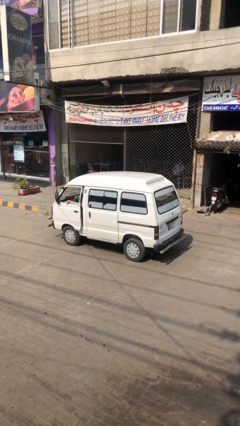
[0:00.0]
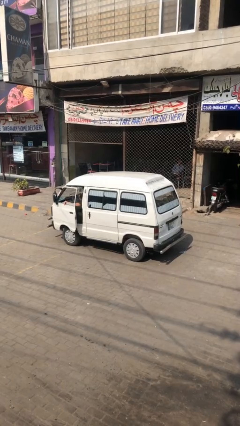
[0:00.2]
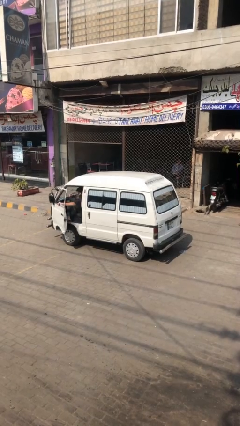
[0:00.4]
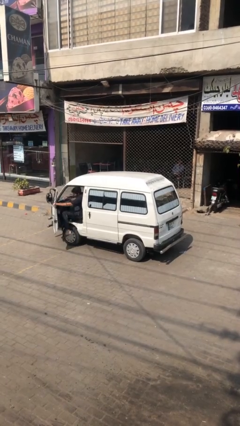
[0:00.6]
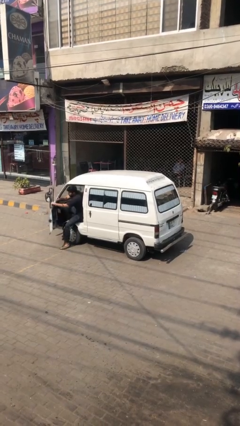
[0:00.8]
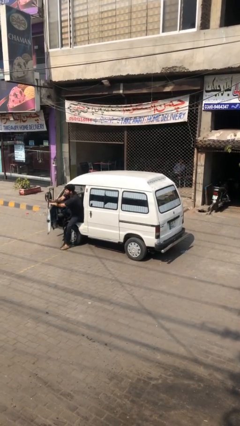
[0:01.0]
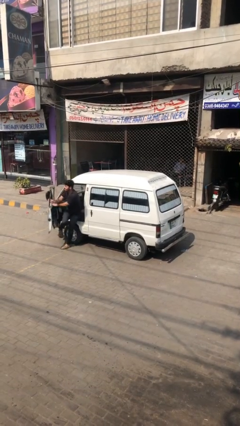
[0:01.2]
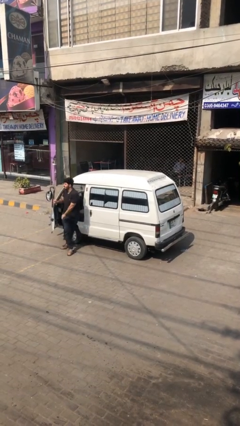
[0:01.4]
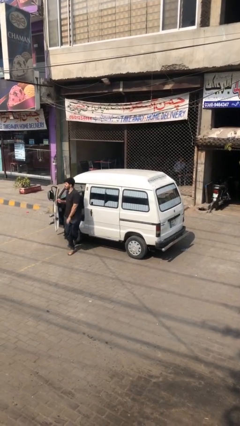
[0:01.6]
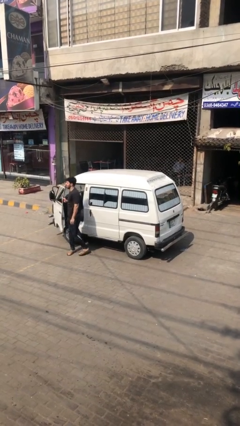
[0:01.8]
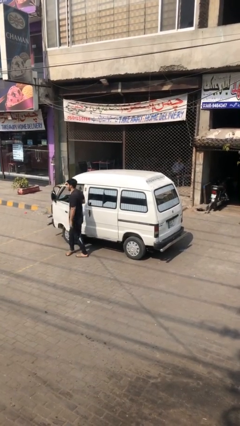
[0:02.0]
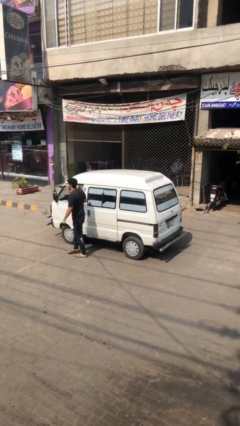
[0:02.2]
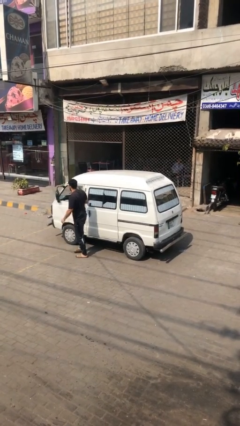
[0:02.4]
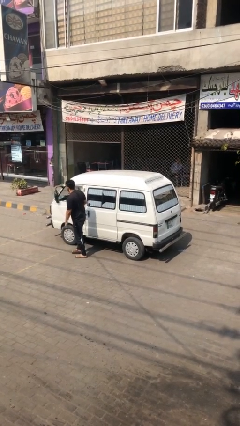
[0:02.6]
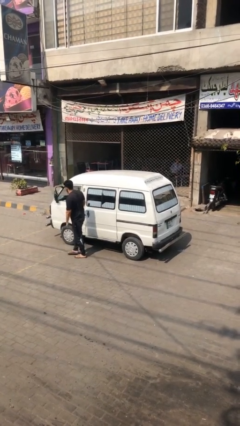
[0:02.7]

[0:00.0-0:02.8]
car drops off person

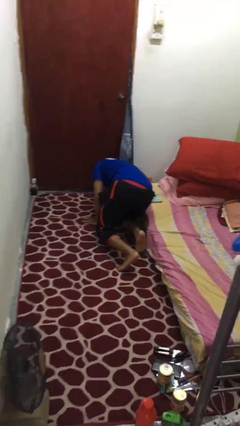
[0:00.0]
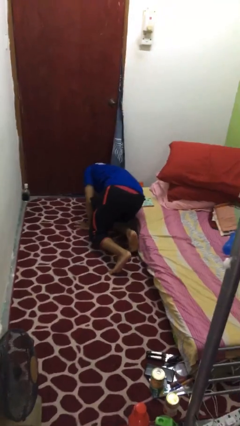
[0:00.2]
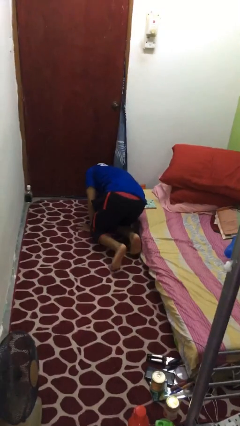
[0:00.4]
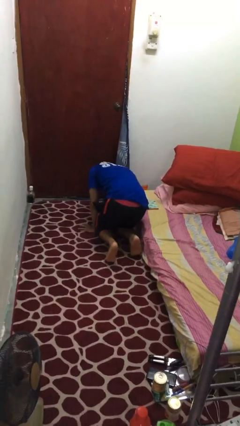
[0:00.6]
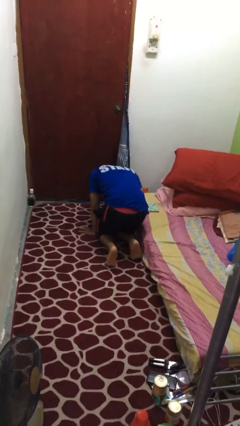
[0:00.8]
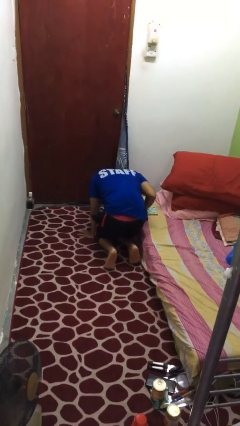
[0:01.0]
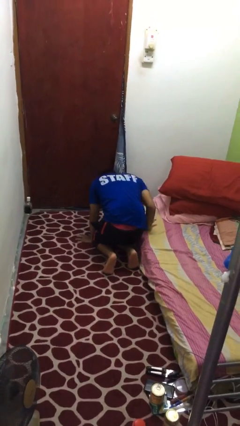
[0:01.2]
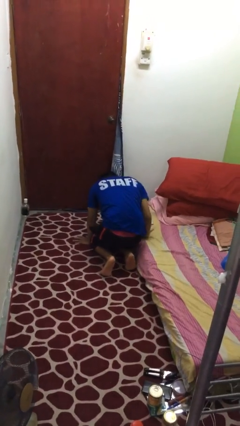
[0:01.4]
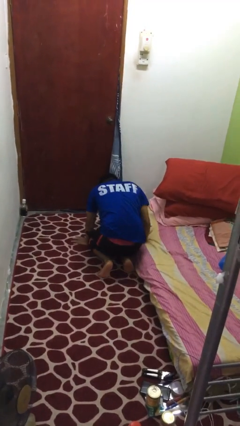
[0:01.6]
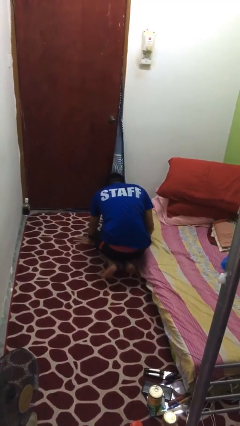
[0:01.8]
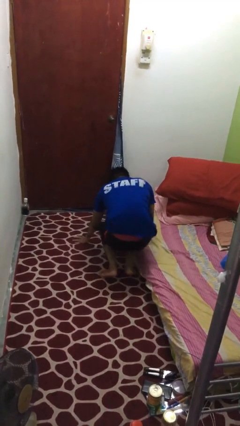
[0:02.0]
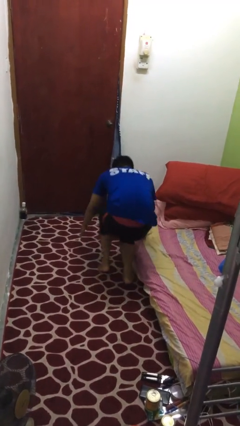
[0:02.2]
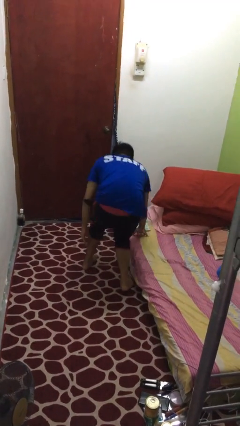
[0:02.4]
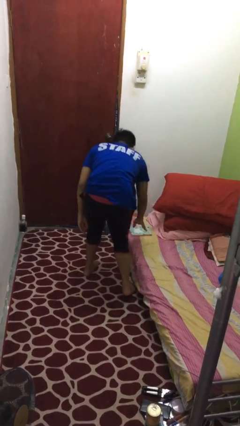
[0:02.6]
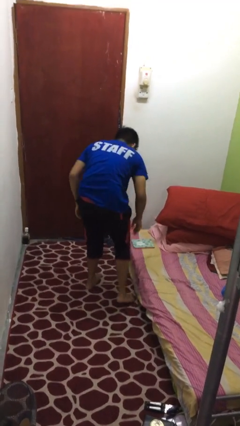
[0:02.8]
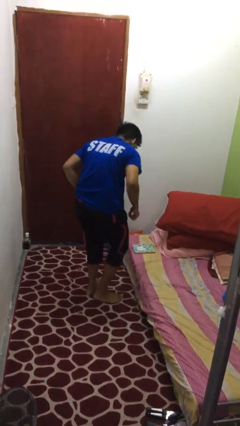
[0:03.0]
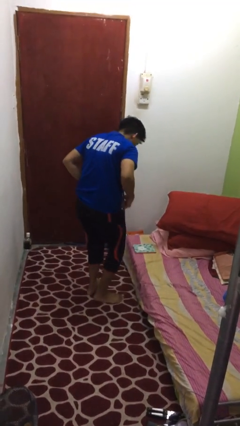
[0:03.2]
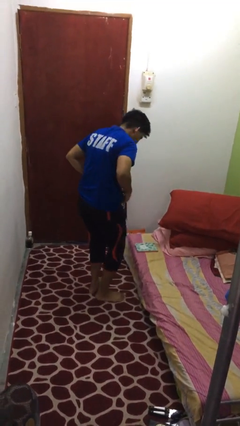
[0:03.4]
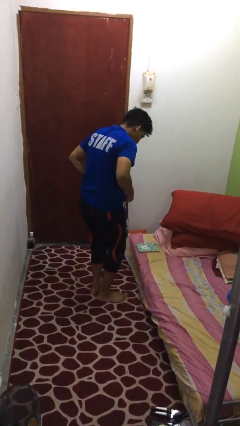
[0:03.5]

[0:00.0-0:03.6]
person stands up from floor

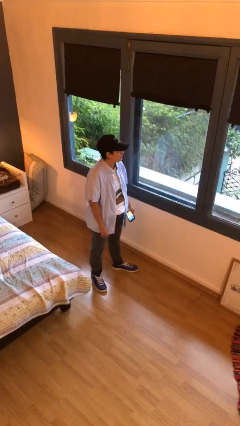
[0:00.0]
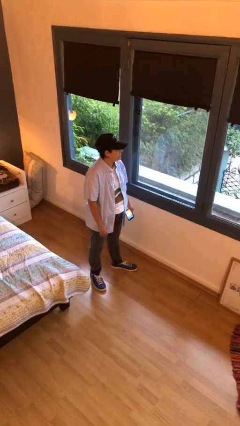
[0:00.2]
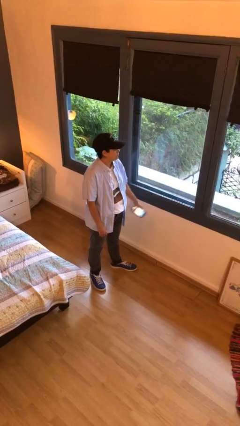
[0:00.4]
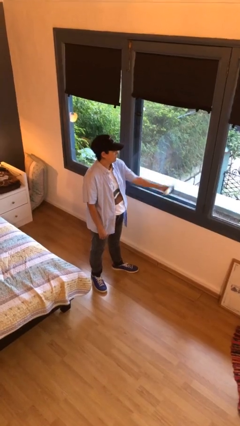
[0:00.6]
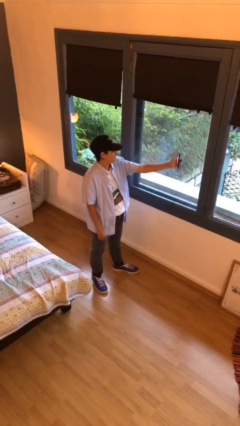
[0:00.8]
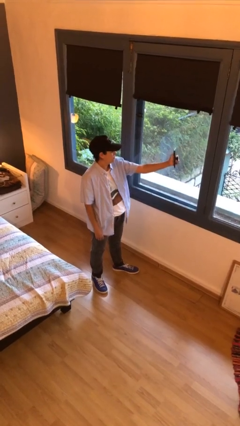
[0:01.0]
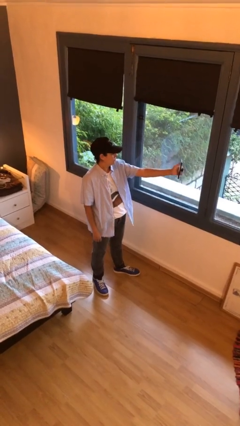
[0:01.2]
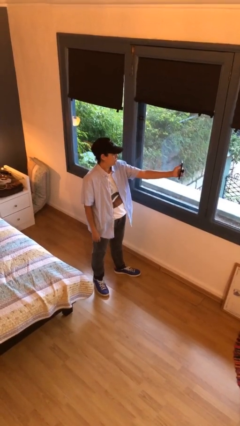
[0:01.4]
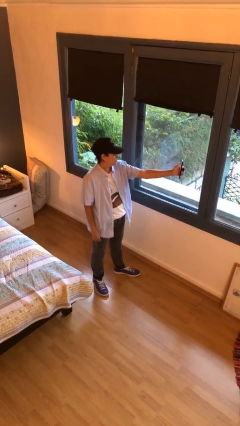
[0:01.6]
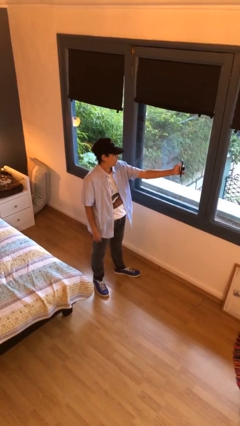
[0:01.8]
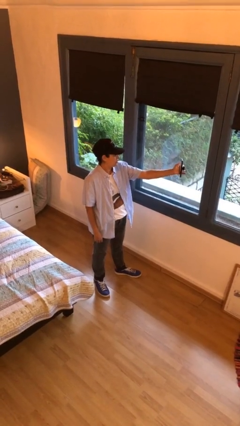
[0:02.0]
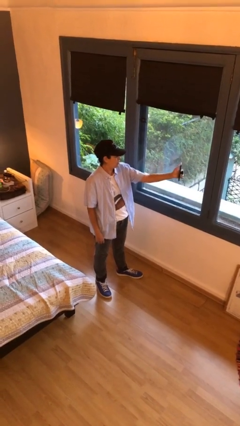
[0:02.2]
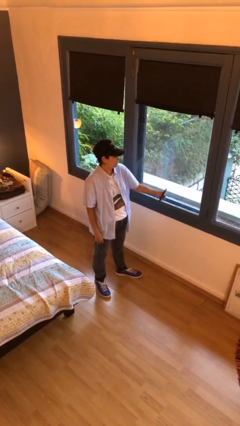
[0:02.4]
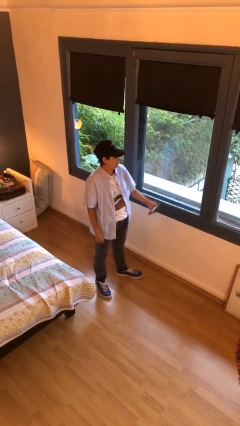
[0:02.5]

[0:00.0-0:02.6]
person takes selfie

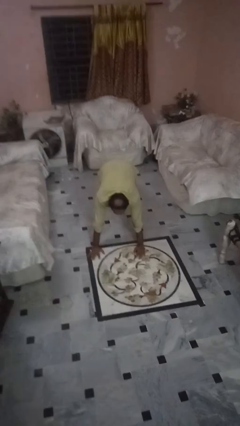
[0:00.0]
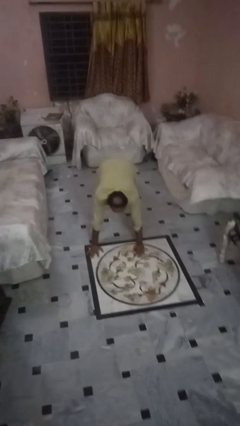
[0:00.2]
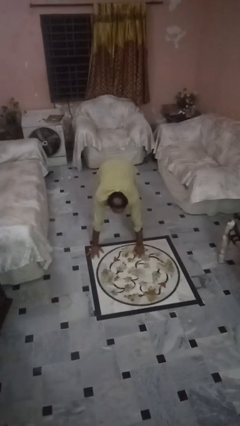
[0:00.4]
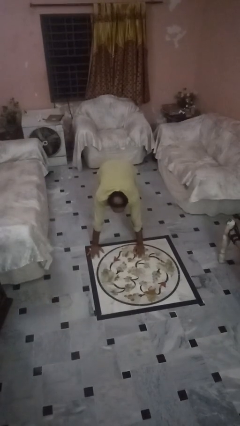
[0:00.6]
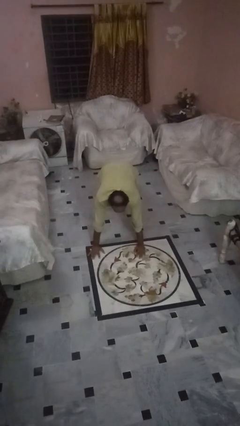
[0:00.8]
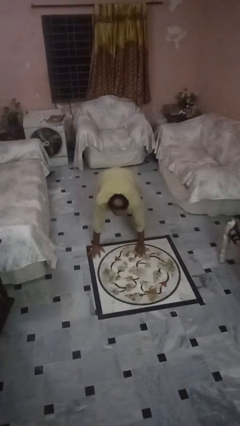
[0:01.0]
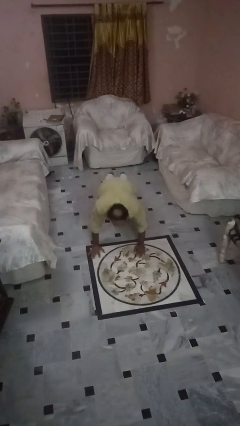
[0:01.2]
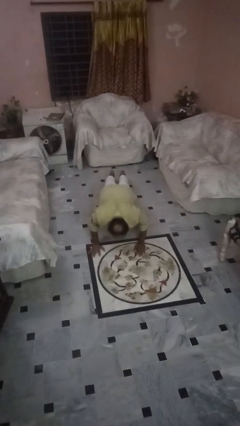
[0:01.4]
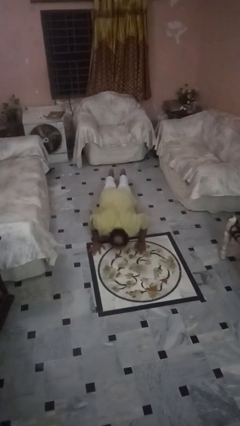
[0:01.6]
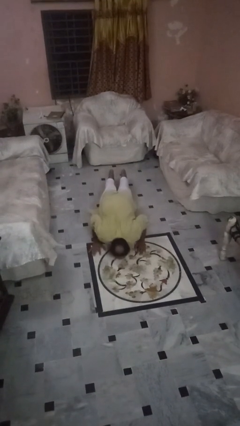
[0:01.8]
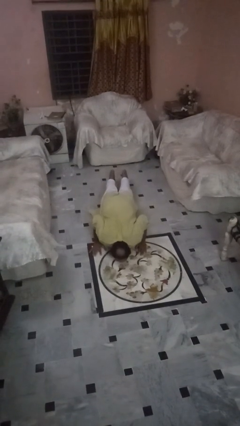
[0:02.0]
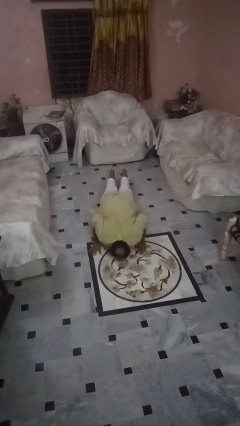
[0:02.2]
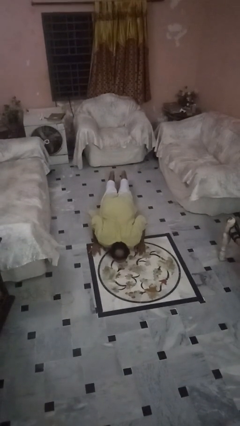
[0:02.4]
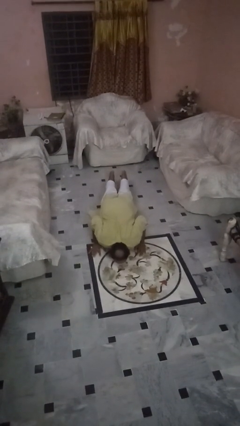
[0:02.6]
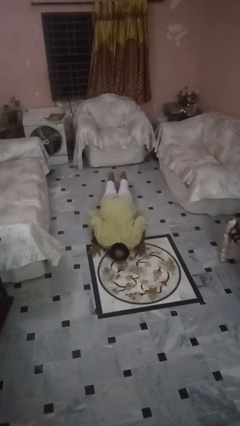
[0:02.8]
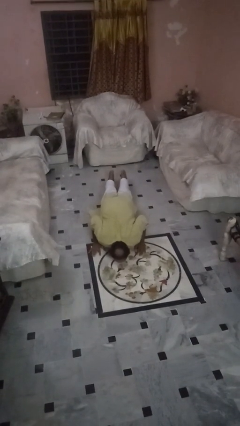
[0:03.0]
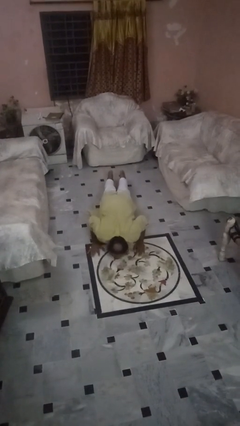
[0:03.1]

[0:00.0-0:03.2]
person exercises with pushup

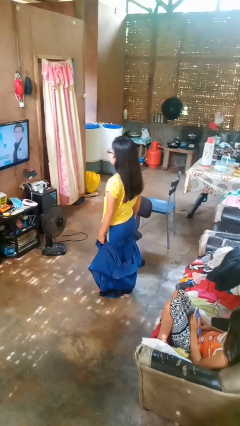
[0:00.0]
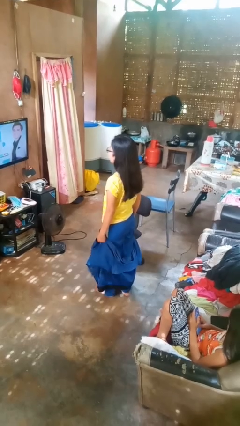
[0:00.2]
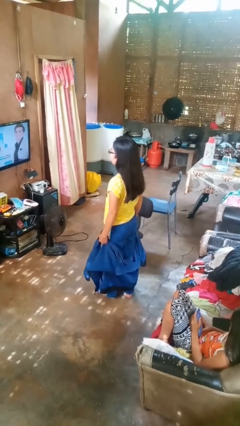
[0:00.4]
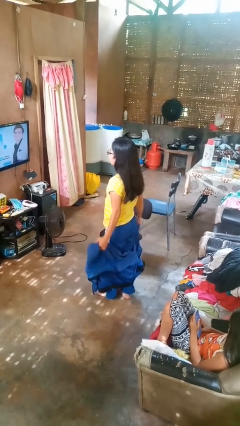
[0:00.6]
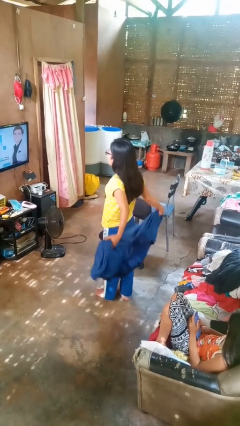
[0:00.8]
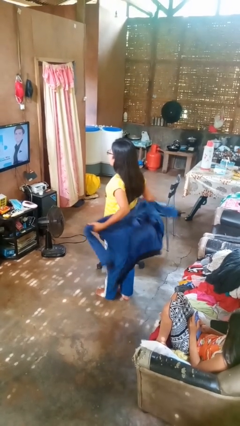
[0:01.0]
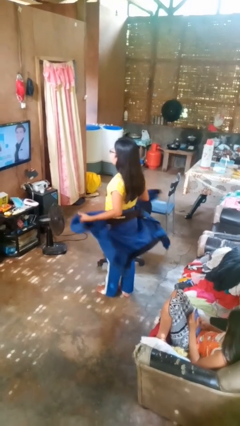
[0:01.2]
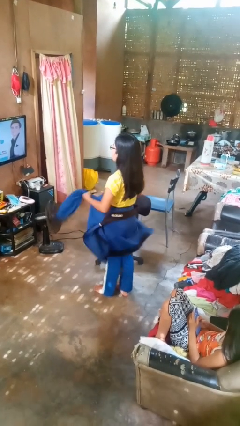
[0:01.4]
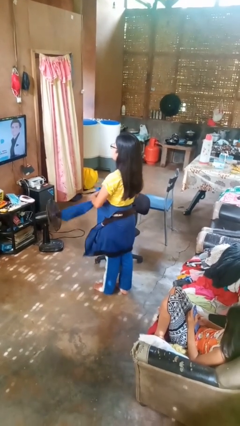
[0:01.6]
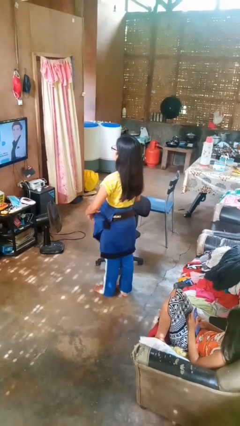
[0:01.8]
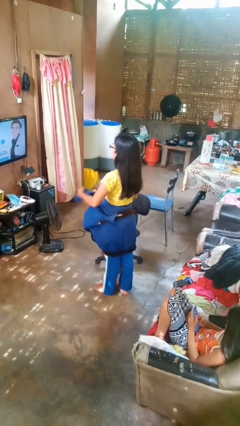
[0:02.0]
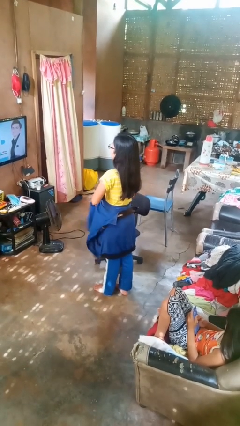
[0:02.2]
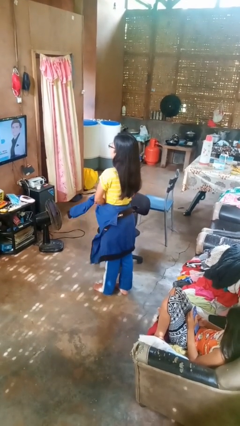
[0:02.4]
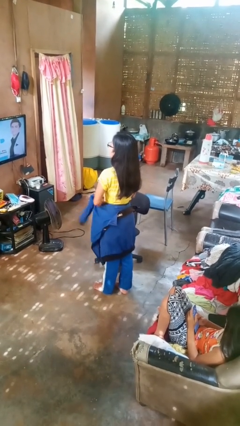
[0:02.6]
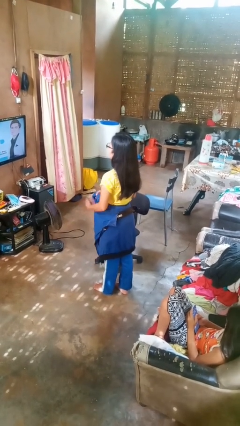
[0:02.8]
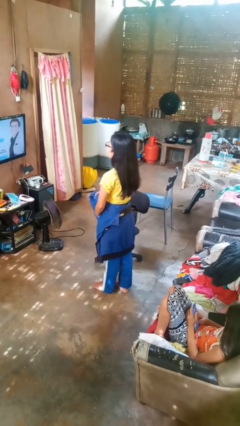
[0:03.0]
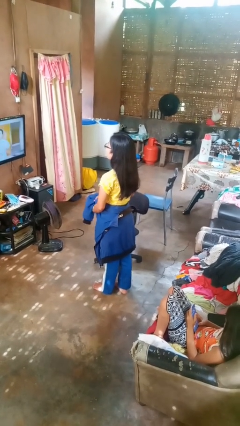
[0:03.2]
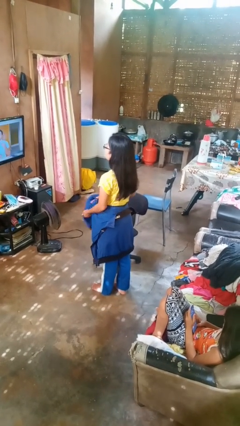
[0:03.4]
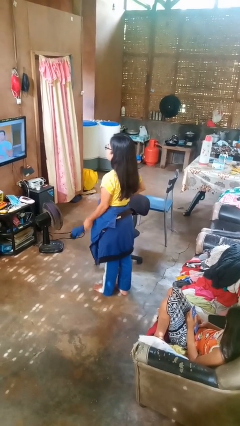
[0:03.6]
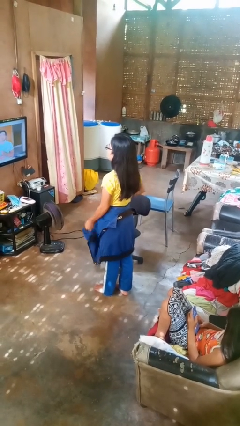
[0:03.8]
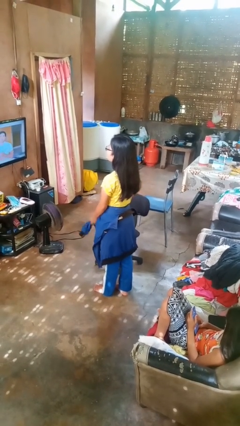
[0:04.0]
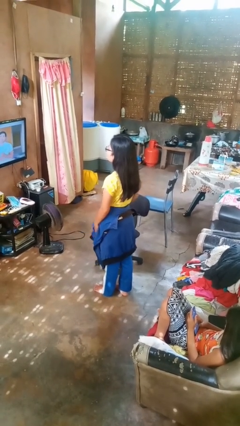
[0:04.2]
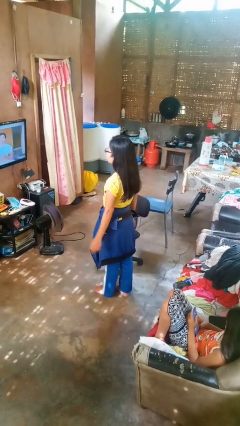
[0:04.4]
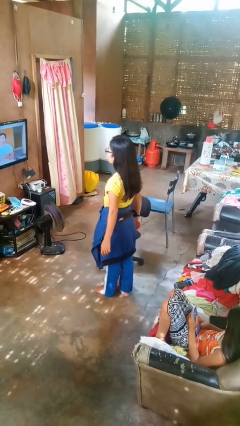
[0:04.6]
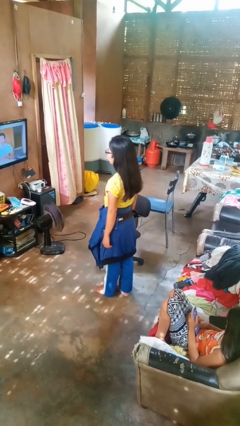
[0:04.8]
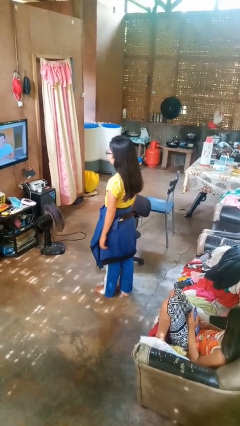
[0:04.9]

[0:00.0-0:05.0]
person ties jacket around waist

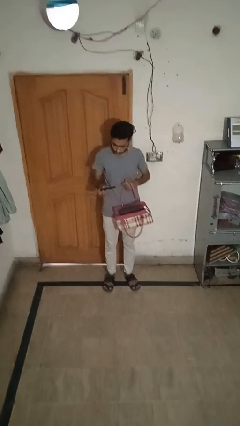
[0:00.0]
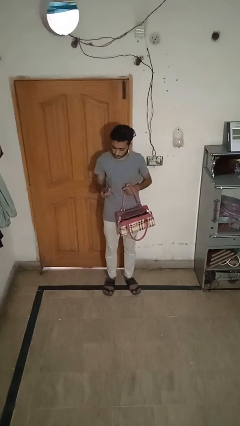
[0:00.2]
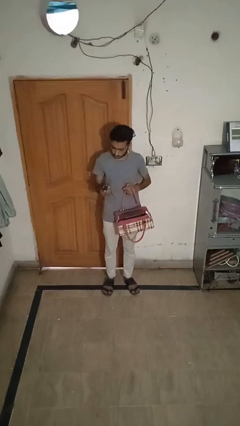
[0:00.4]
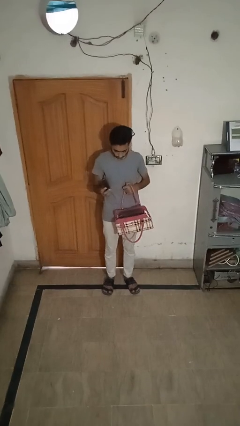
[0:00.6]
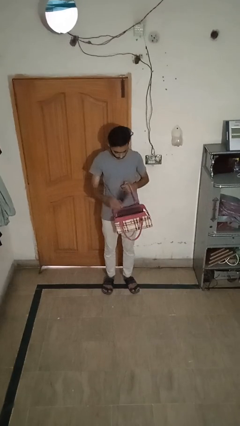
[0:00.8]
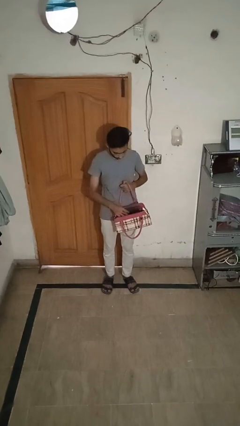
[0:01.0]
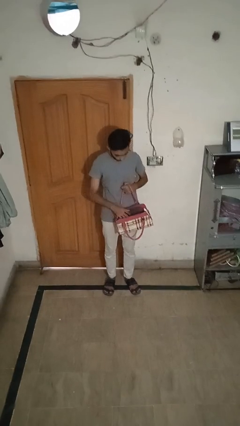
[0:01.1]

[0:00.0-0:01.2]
person puts object into purse
